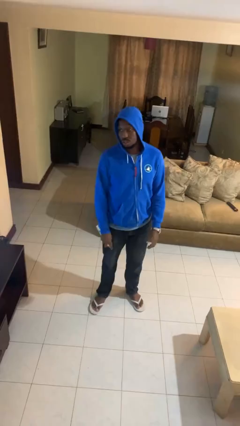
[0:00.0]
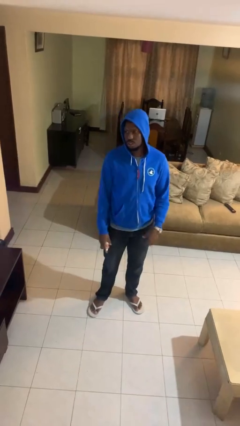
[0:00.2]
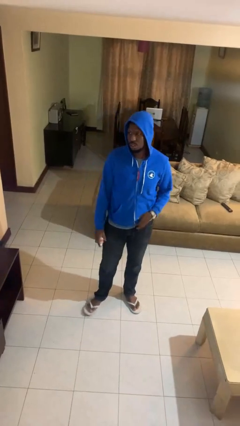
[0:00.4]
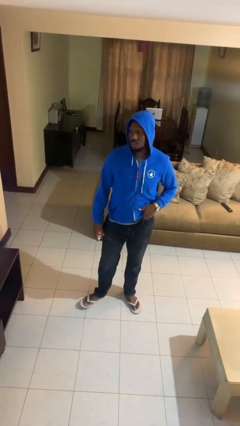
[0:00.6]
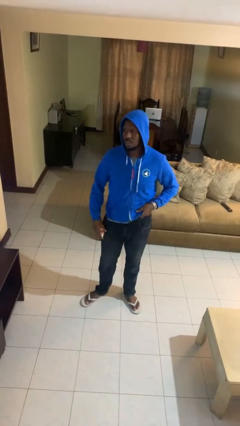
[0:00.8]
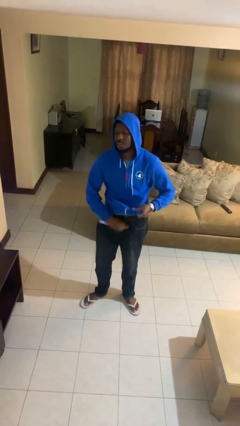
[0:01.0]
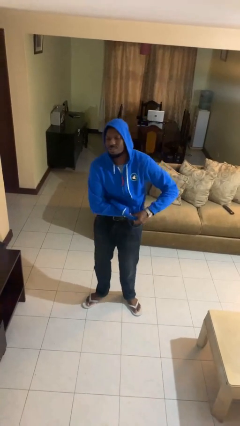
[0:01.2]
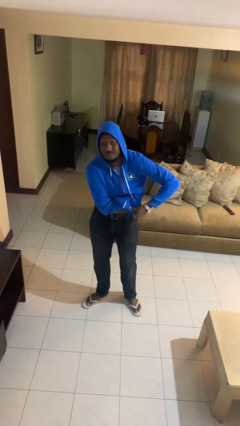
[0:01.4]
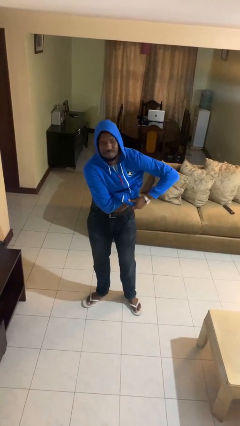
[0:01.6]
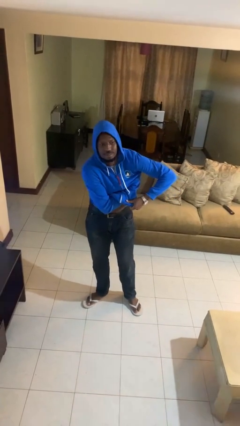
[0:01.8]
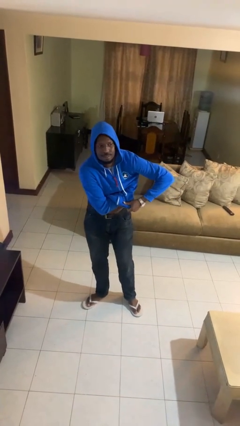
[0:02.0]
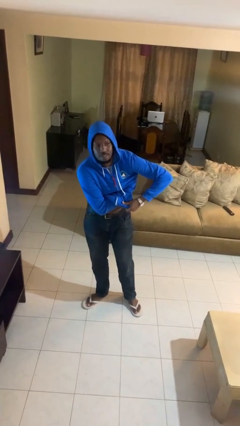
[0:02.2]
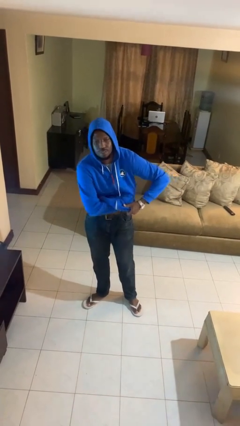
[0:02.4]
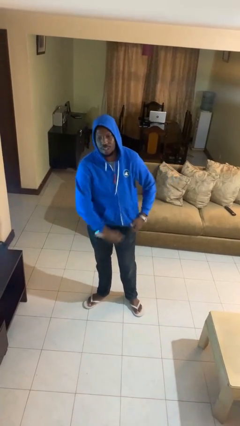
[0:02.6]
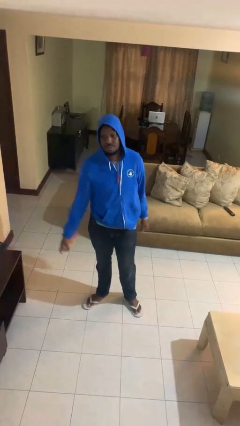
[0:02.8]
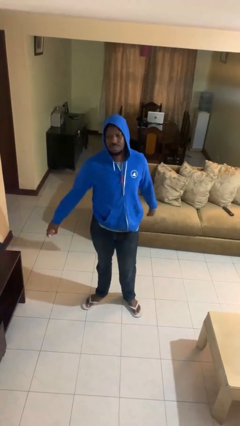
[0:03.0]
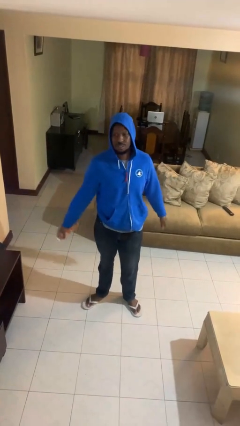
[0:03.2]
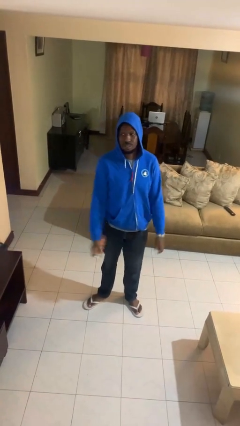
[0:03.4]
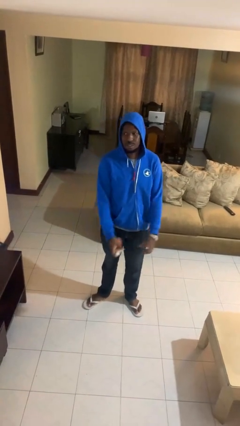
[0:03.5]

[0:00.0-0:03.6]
person applies deodorant

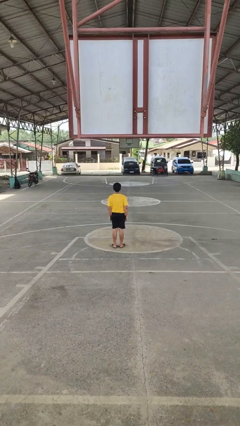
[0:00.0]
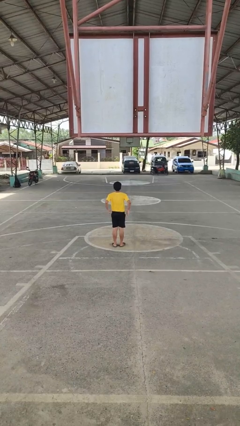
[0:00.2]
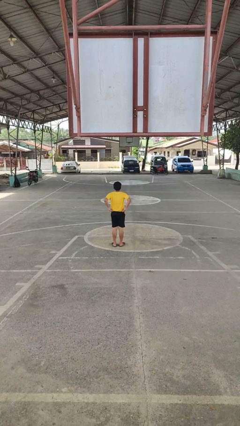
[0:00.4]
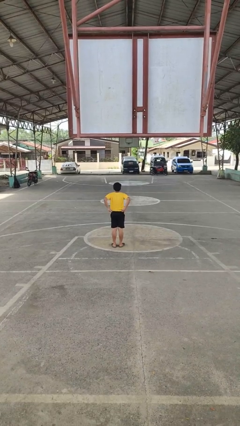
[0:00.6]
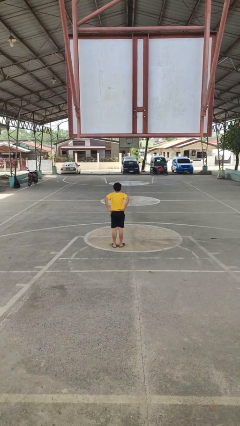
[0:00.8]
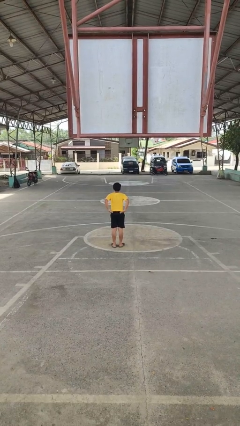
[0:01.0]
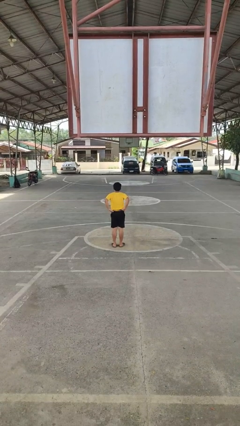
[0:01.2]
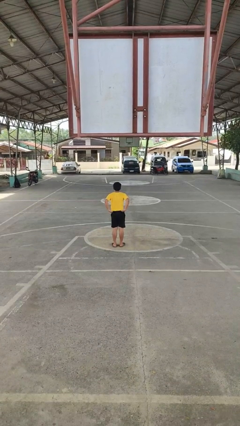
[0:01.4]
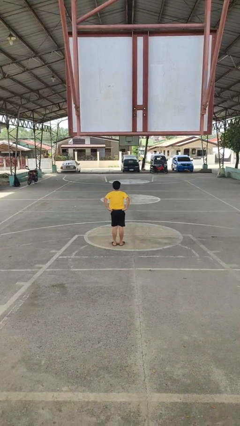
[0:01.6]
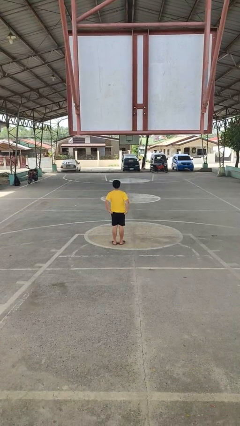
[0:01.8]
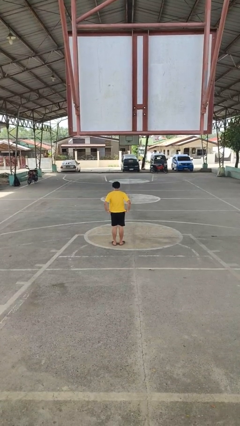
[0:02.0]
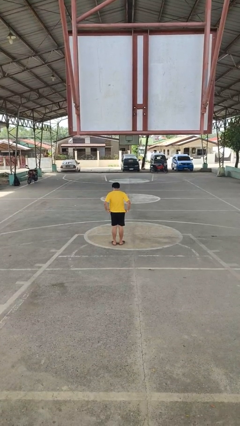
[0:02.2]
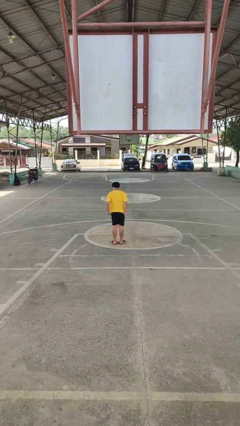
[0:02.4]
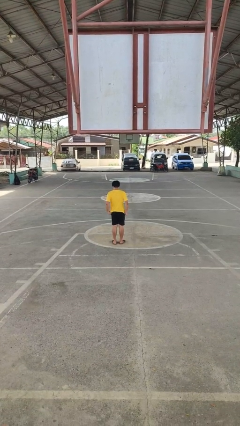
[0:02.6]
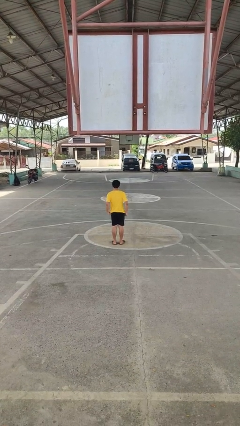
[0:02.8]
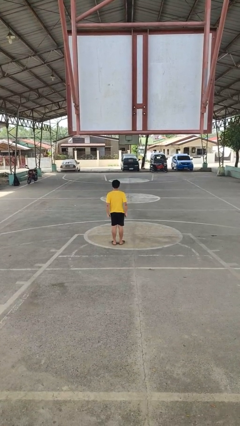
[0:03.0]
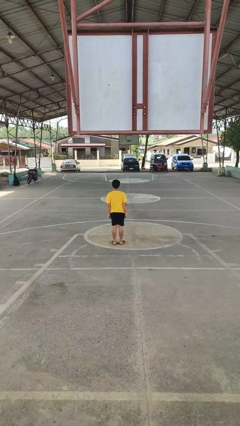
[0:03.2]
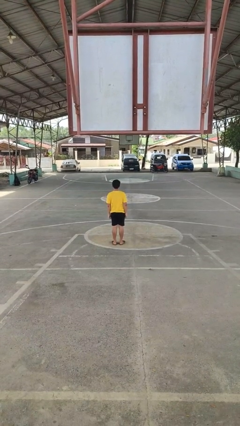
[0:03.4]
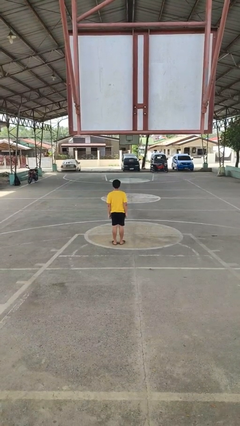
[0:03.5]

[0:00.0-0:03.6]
person untucks shirt

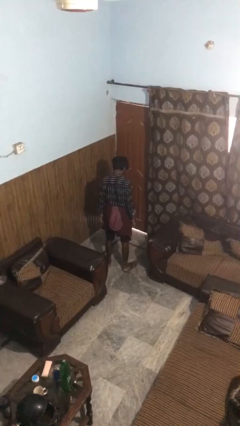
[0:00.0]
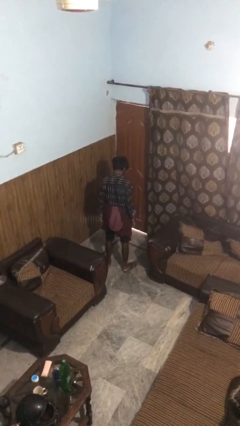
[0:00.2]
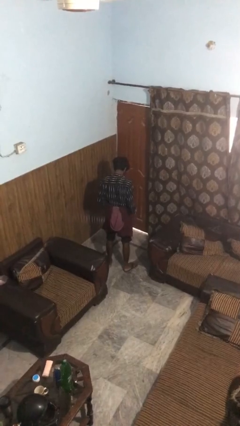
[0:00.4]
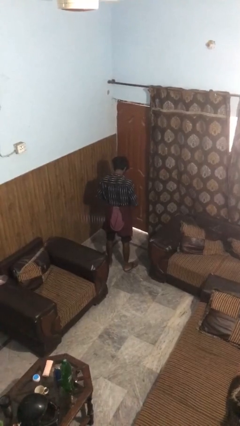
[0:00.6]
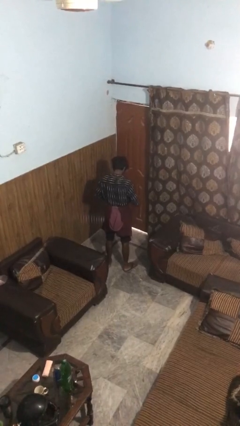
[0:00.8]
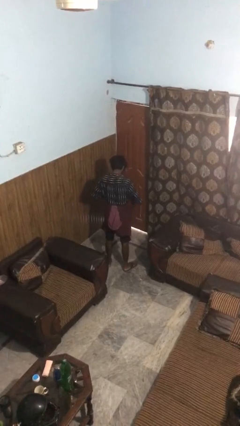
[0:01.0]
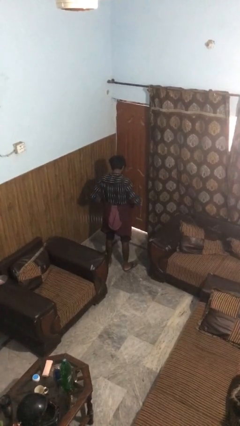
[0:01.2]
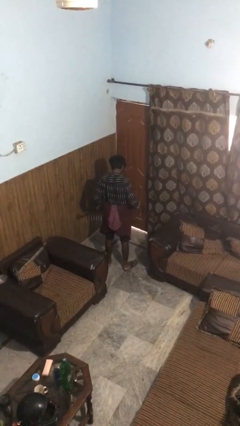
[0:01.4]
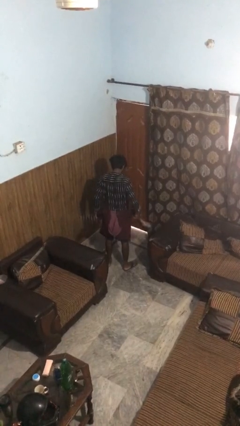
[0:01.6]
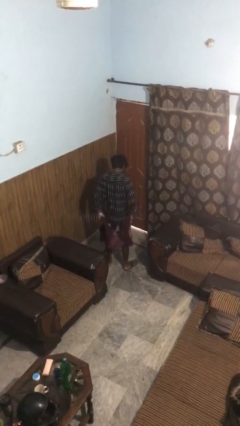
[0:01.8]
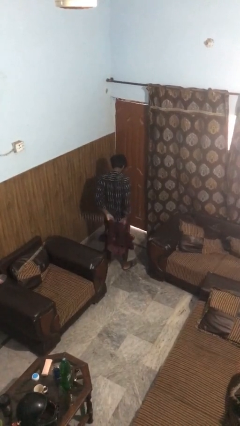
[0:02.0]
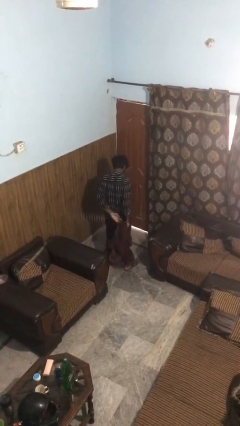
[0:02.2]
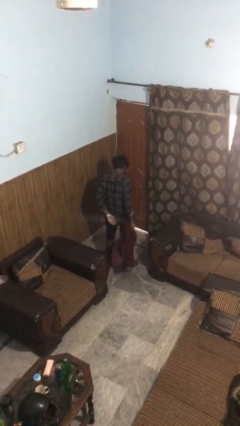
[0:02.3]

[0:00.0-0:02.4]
person unties jacket around waist

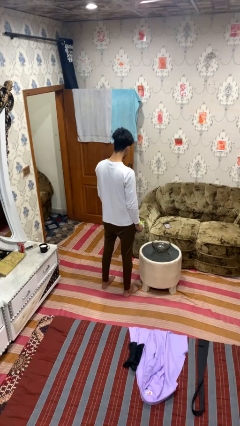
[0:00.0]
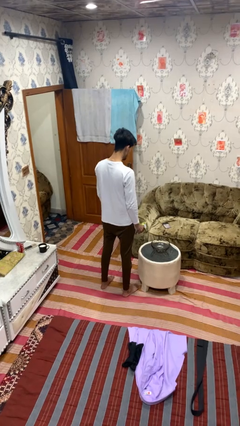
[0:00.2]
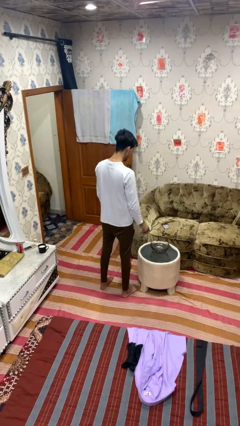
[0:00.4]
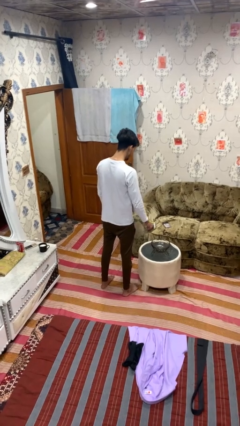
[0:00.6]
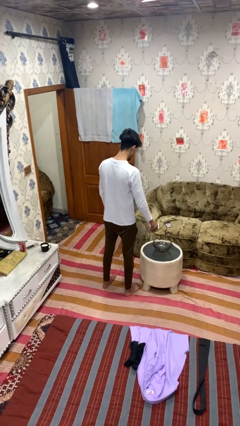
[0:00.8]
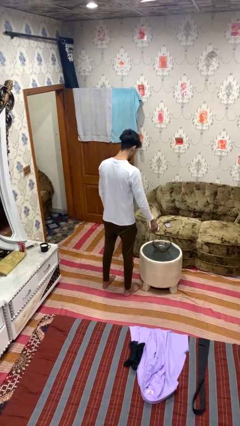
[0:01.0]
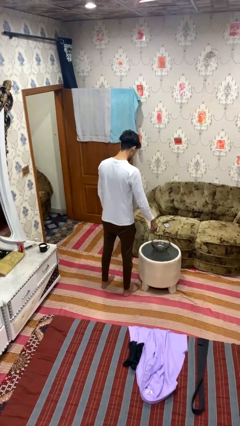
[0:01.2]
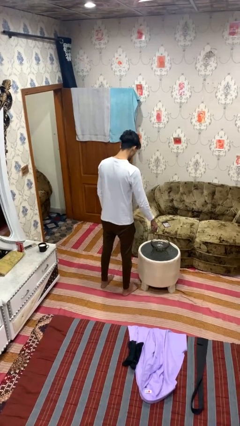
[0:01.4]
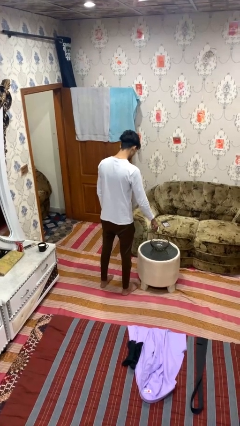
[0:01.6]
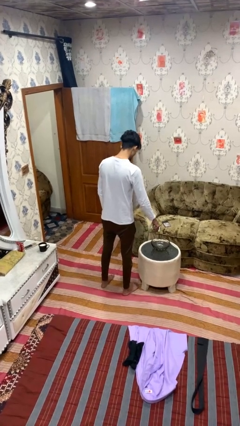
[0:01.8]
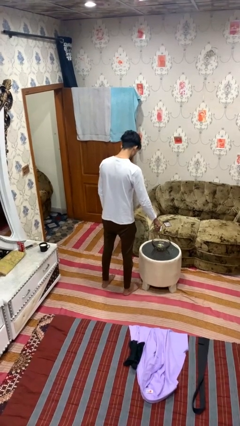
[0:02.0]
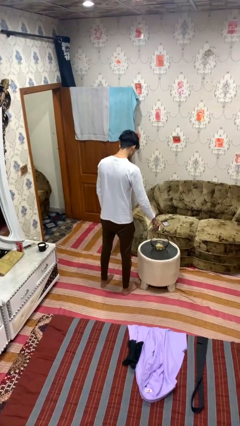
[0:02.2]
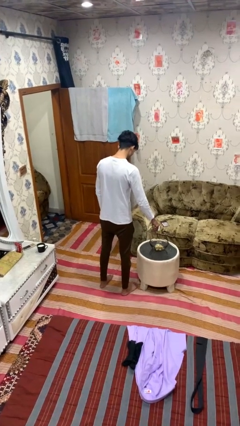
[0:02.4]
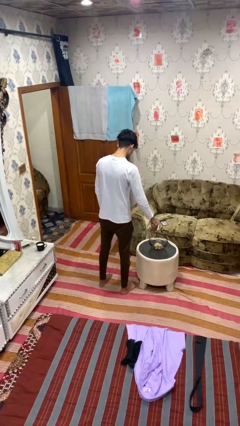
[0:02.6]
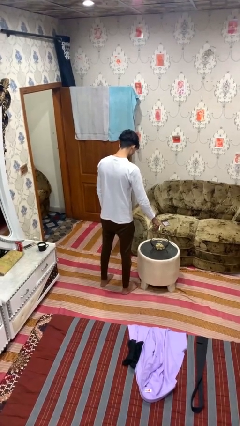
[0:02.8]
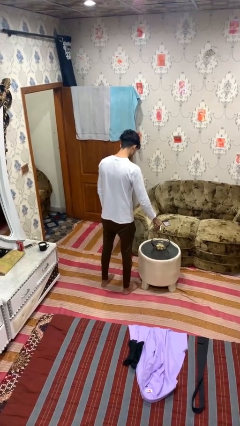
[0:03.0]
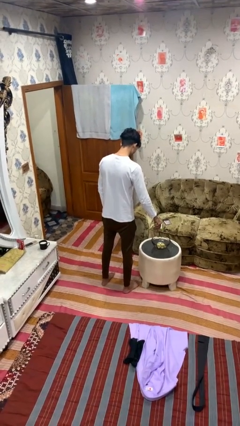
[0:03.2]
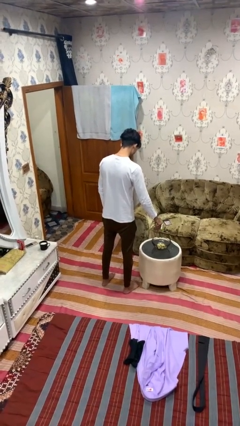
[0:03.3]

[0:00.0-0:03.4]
person pours into bowl

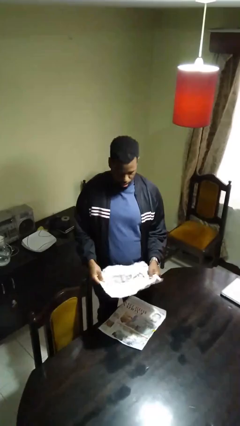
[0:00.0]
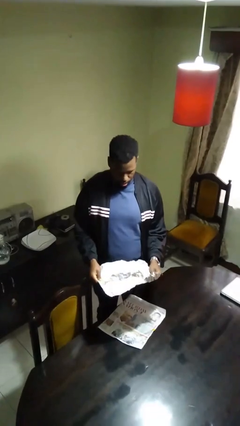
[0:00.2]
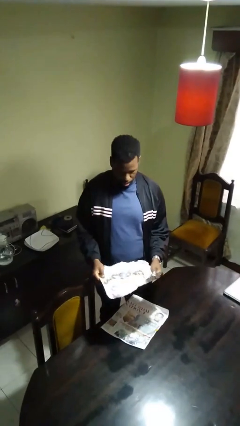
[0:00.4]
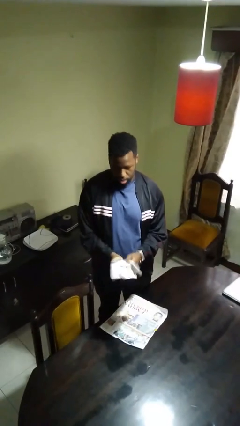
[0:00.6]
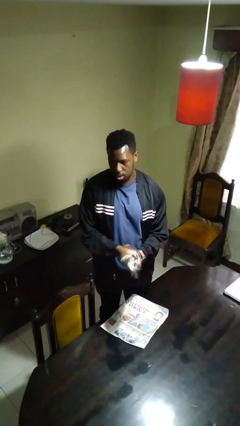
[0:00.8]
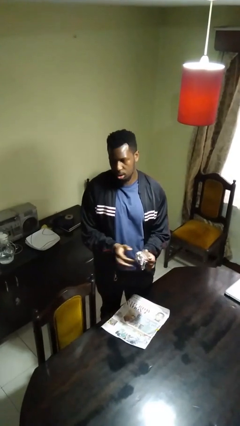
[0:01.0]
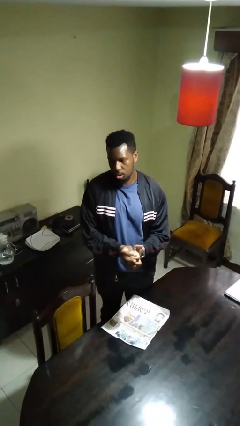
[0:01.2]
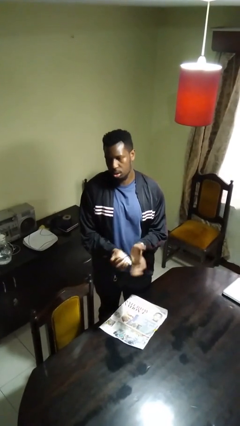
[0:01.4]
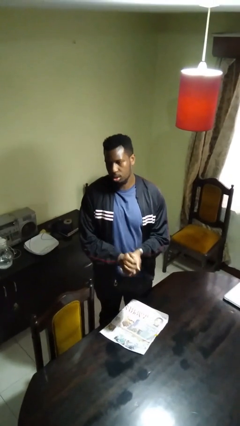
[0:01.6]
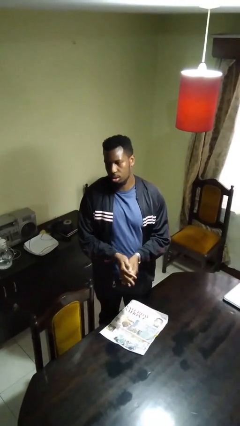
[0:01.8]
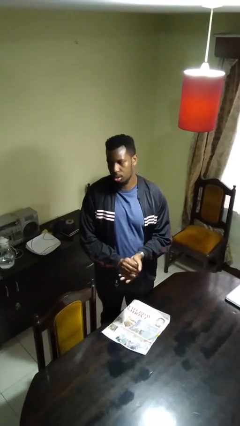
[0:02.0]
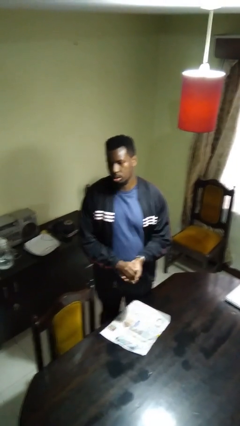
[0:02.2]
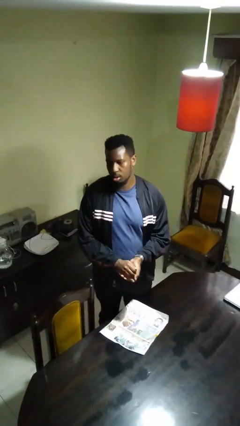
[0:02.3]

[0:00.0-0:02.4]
person crumples paper

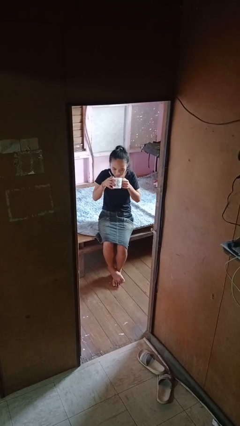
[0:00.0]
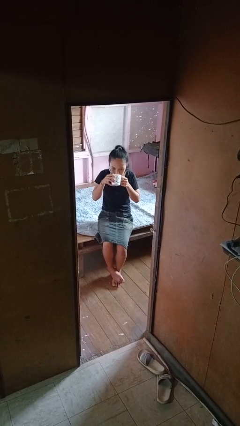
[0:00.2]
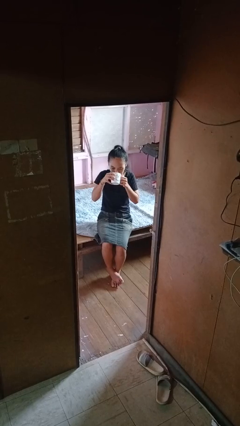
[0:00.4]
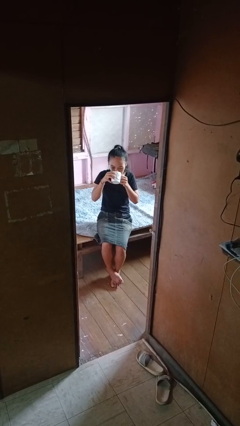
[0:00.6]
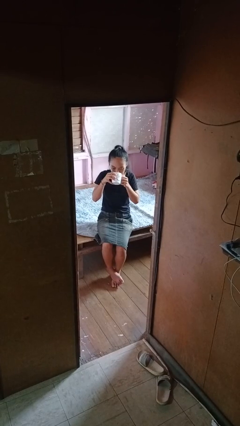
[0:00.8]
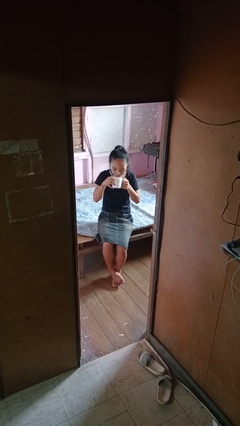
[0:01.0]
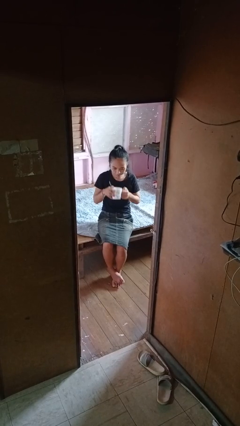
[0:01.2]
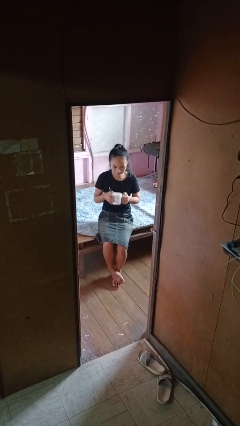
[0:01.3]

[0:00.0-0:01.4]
person drinks from mug

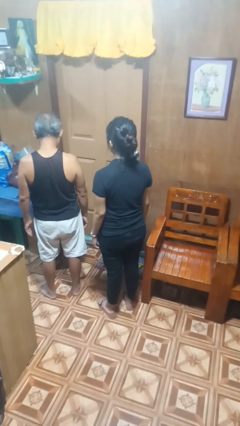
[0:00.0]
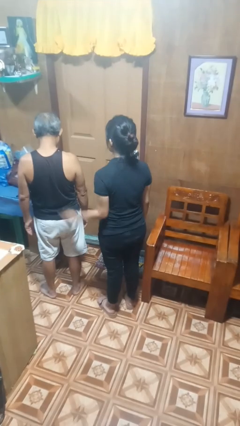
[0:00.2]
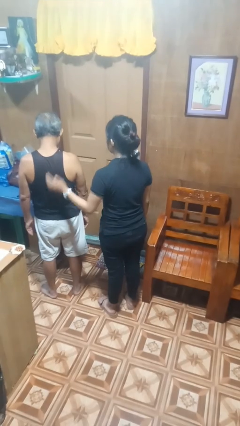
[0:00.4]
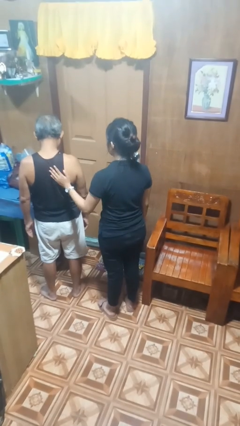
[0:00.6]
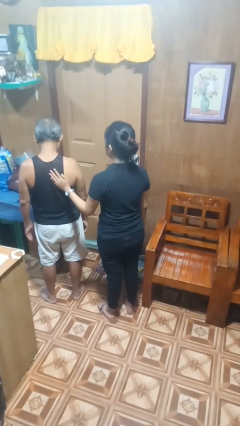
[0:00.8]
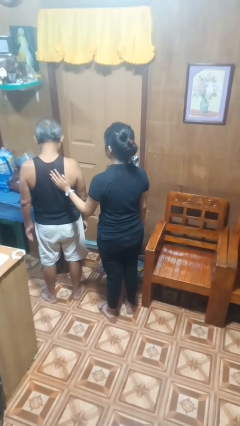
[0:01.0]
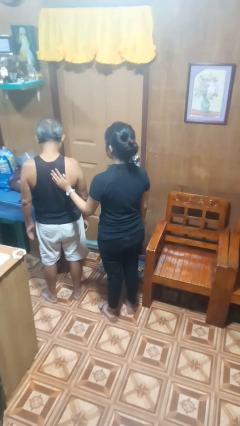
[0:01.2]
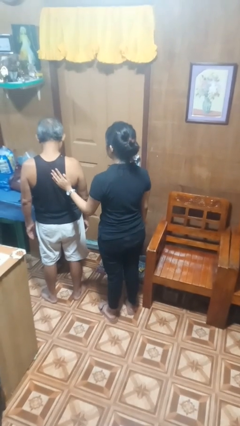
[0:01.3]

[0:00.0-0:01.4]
person touches back of person
